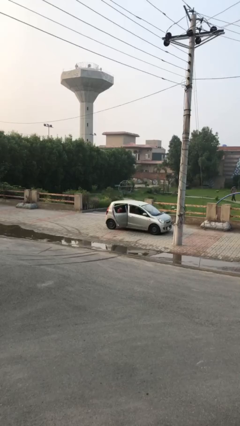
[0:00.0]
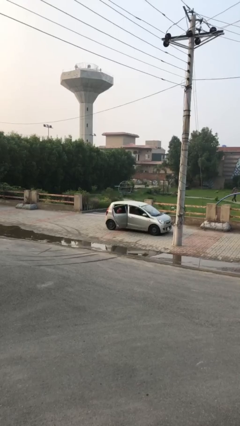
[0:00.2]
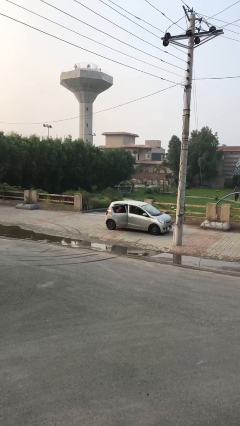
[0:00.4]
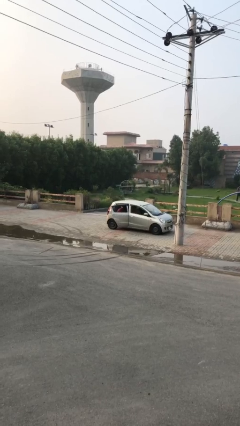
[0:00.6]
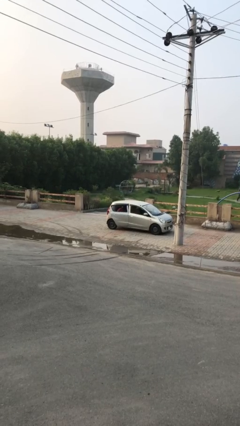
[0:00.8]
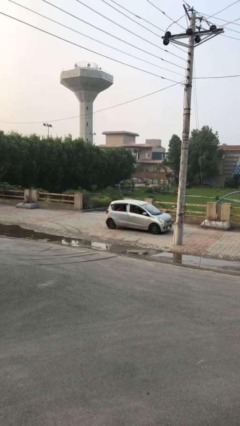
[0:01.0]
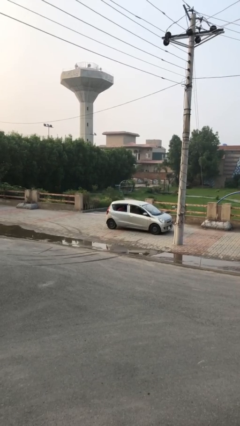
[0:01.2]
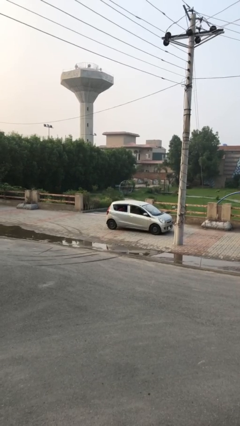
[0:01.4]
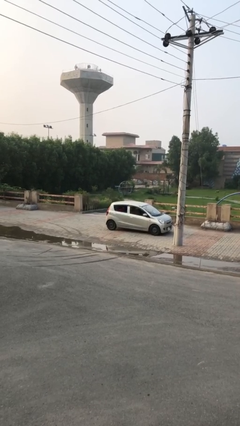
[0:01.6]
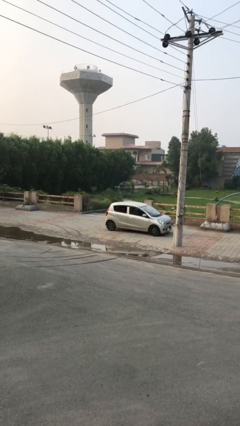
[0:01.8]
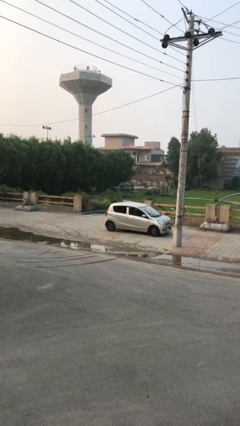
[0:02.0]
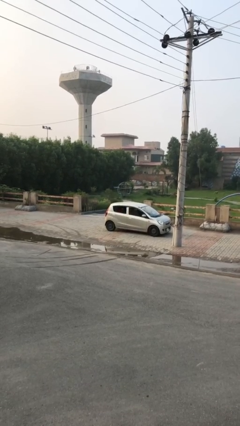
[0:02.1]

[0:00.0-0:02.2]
person closes car door

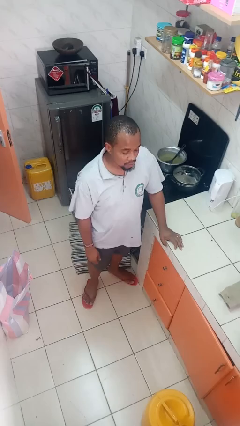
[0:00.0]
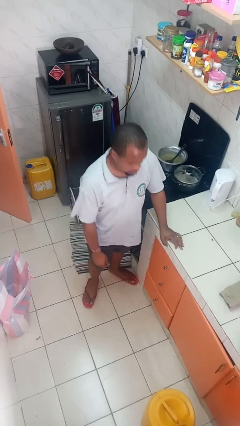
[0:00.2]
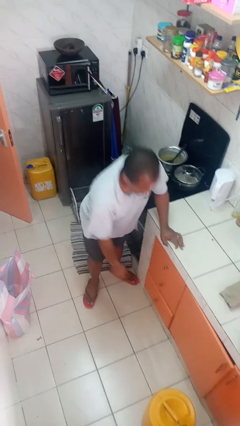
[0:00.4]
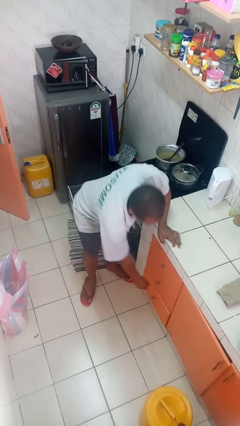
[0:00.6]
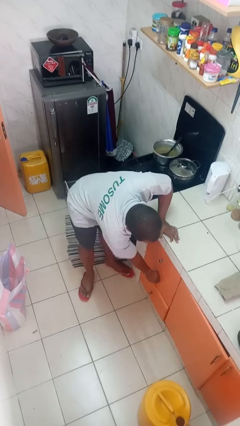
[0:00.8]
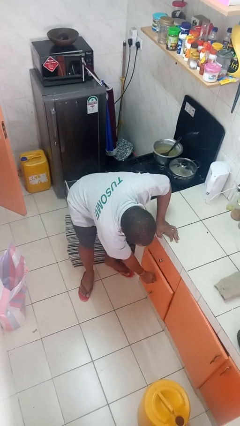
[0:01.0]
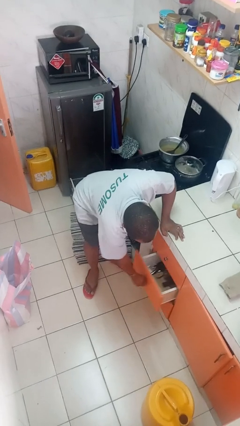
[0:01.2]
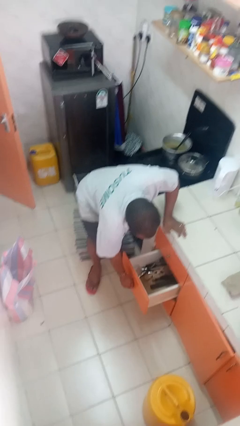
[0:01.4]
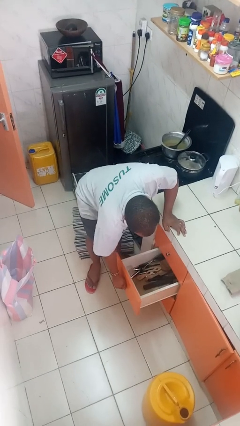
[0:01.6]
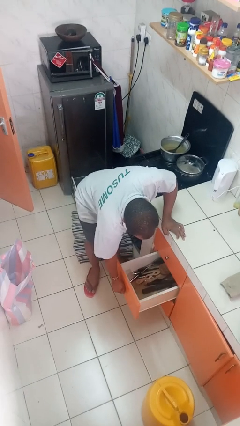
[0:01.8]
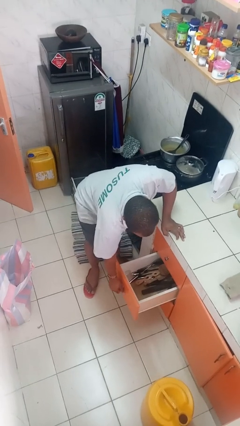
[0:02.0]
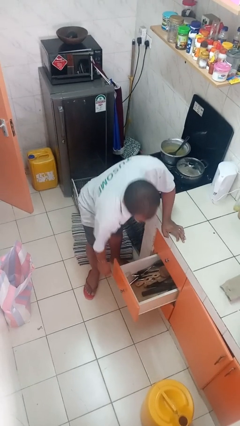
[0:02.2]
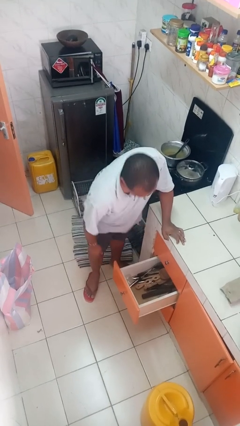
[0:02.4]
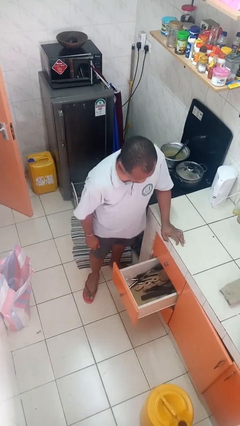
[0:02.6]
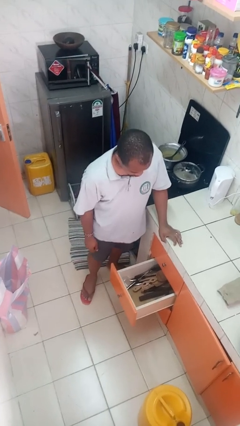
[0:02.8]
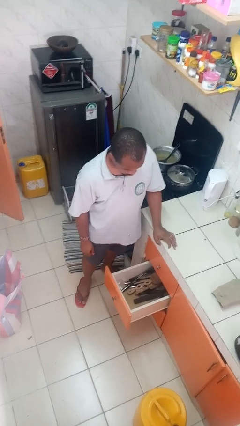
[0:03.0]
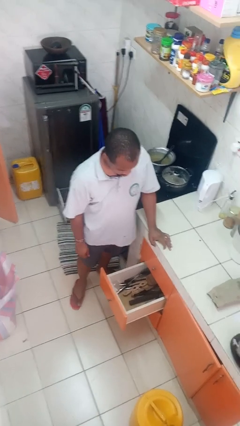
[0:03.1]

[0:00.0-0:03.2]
person opens kitchen drawer

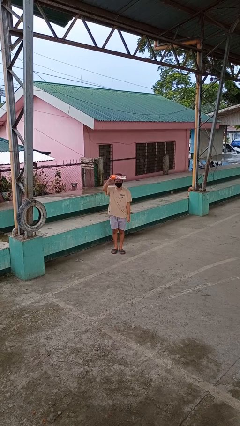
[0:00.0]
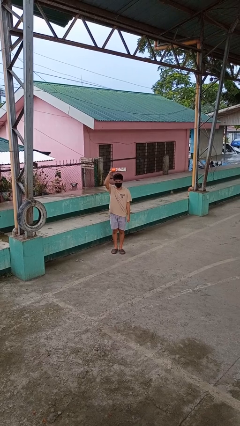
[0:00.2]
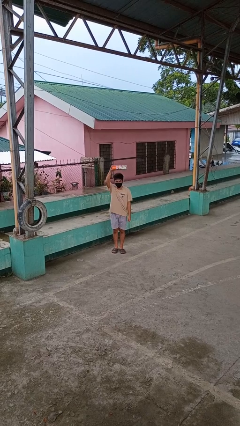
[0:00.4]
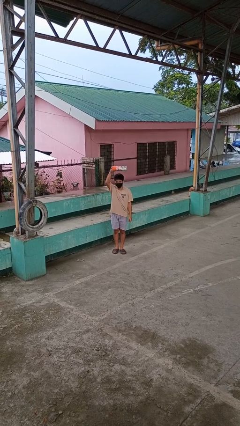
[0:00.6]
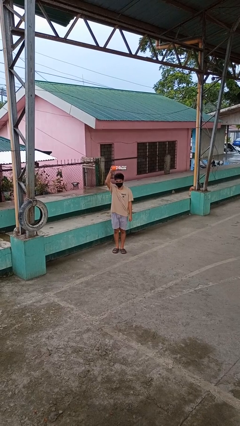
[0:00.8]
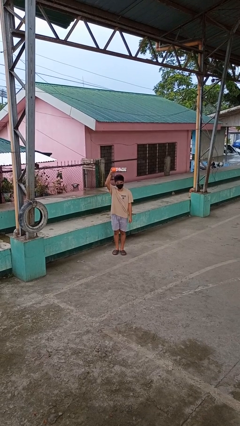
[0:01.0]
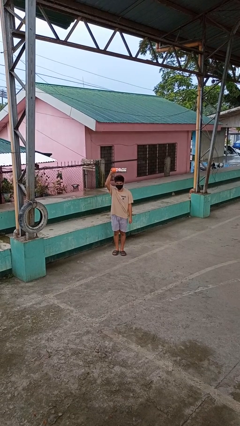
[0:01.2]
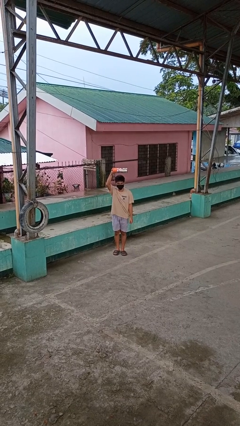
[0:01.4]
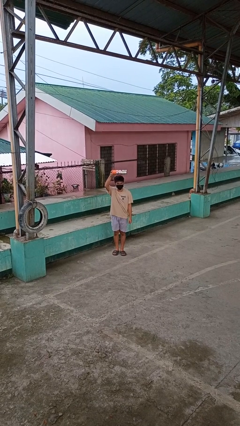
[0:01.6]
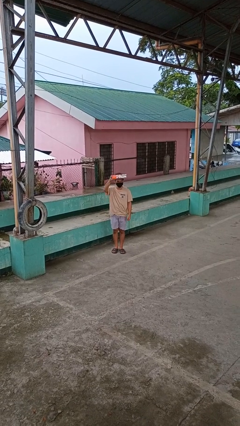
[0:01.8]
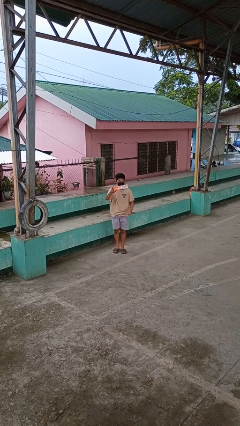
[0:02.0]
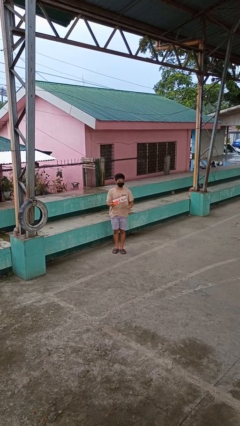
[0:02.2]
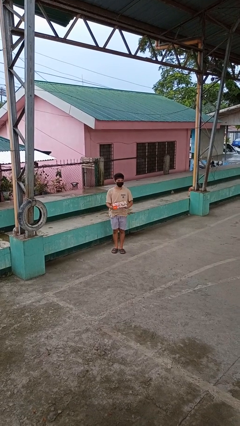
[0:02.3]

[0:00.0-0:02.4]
person holds object above head

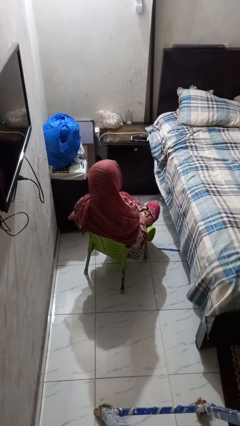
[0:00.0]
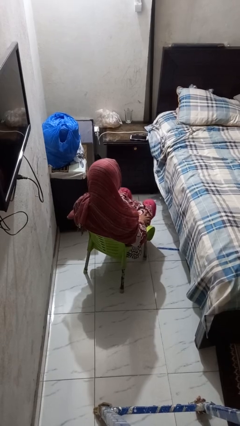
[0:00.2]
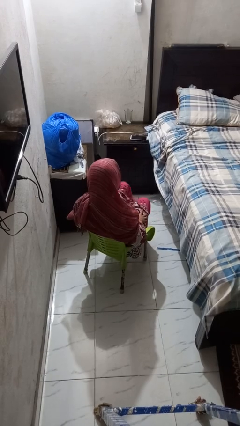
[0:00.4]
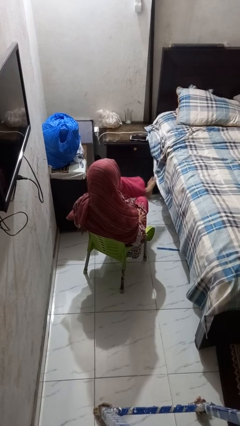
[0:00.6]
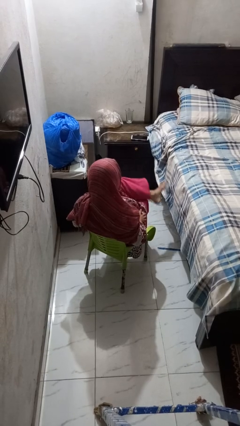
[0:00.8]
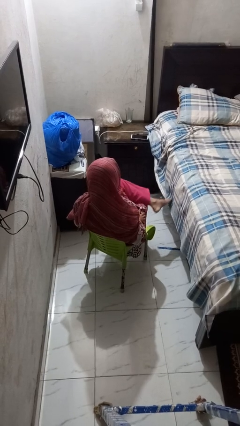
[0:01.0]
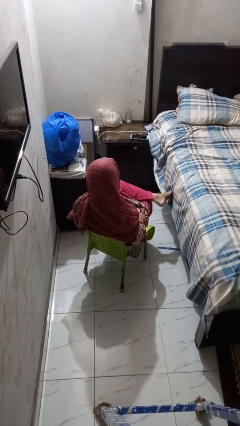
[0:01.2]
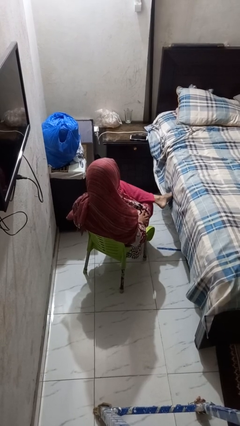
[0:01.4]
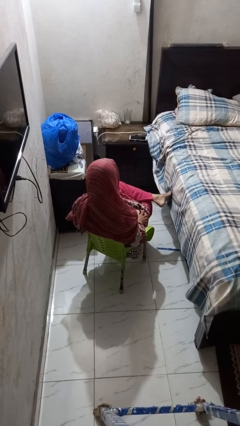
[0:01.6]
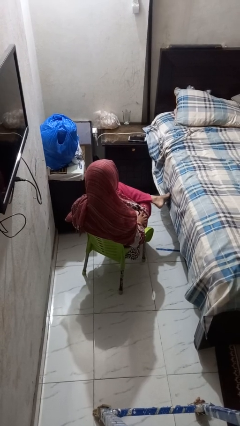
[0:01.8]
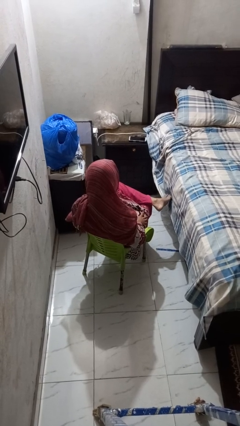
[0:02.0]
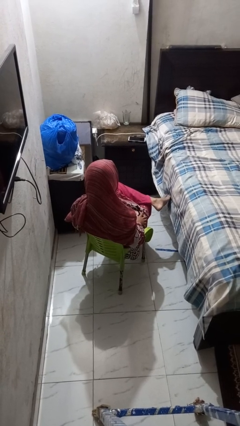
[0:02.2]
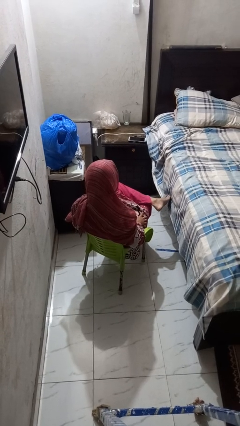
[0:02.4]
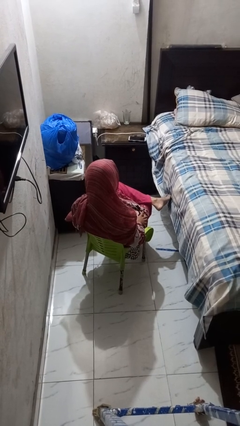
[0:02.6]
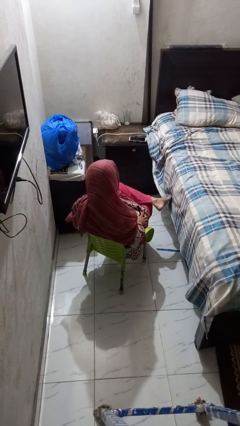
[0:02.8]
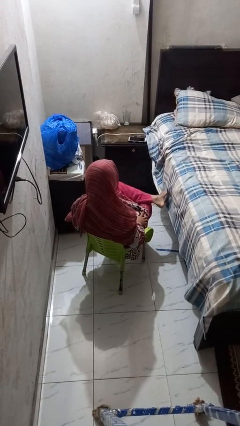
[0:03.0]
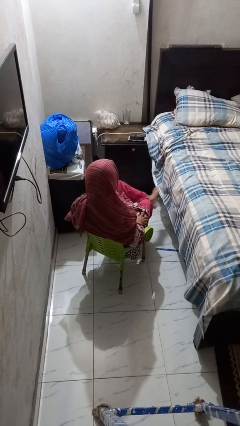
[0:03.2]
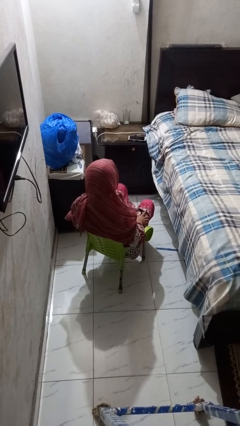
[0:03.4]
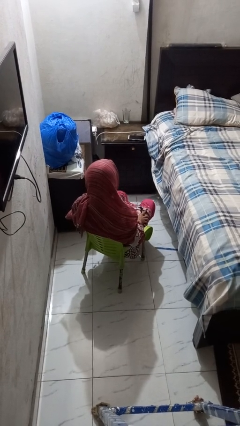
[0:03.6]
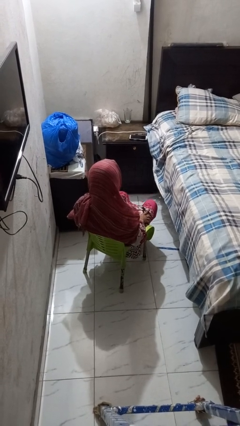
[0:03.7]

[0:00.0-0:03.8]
person crosses legs

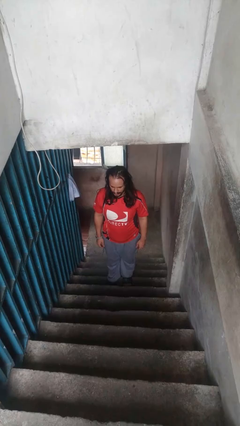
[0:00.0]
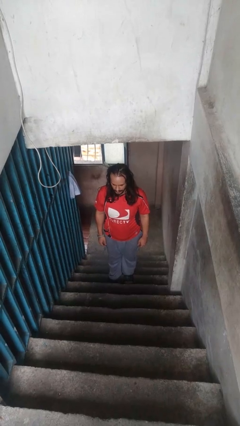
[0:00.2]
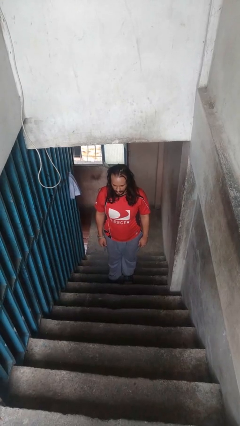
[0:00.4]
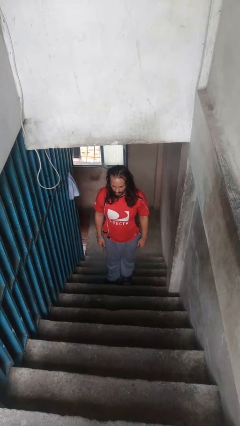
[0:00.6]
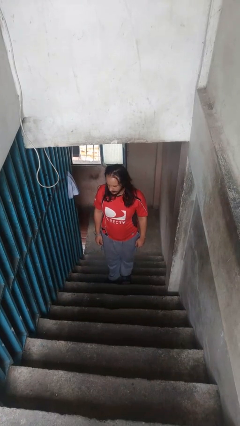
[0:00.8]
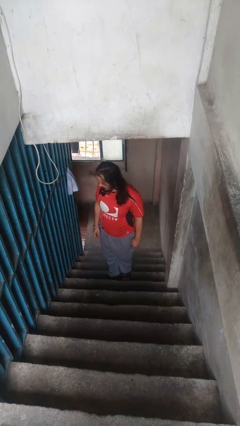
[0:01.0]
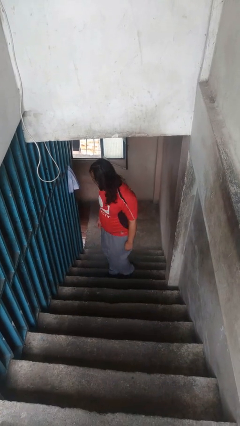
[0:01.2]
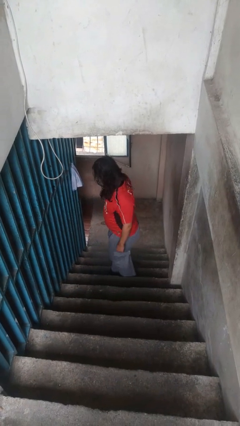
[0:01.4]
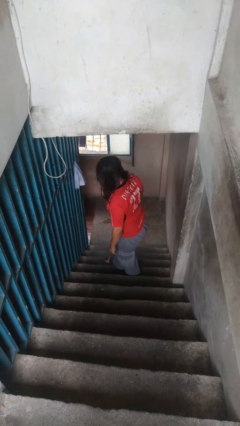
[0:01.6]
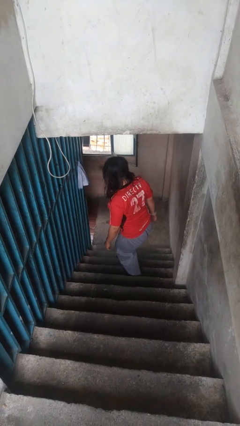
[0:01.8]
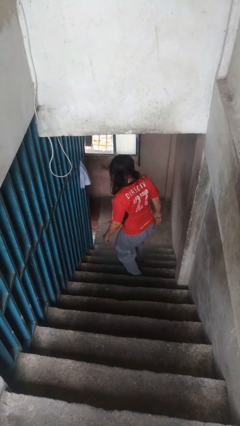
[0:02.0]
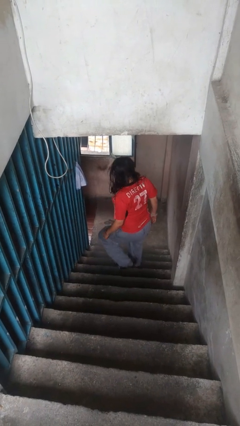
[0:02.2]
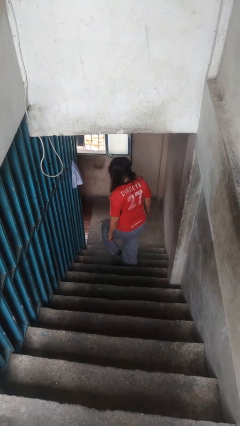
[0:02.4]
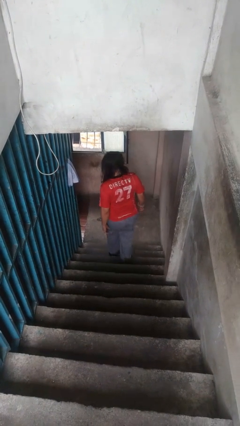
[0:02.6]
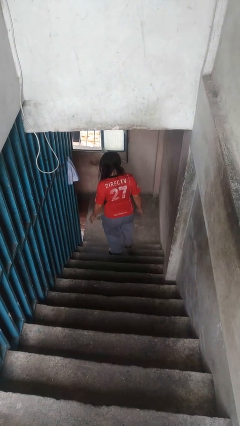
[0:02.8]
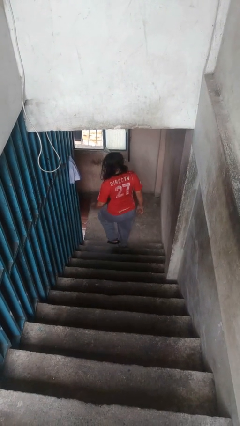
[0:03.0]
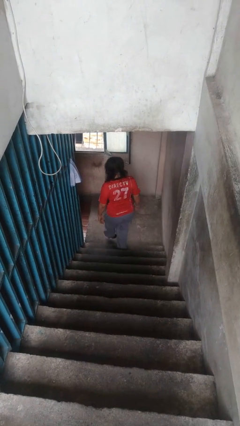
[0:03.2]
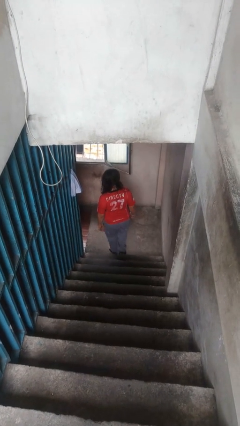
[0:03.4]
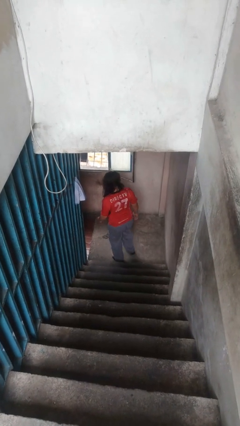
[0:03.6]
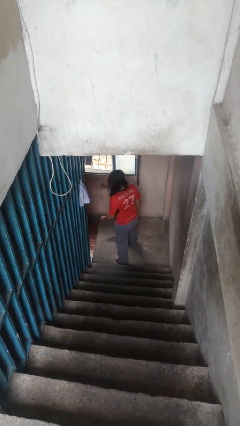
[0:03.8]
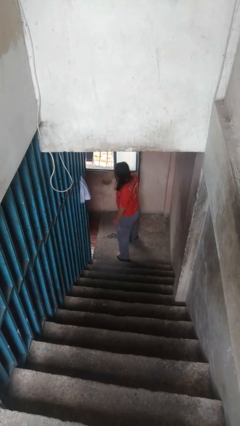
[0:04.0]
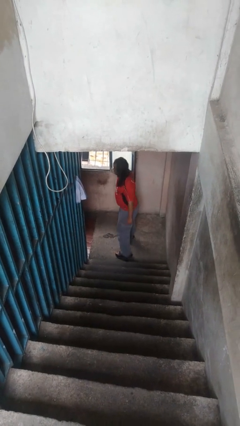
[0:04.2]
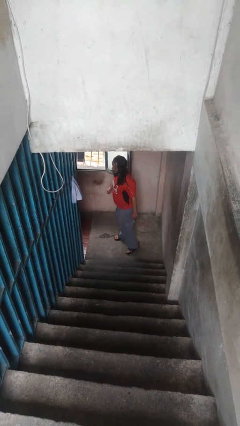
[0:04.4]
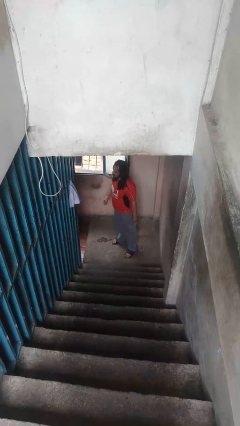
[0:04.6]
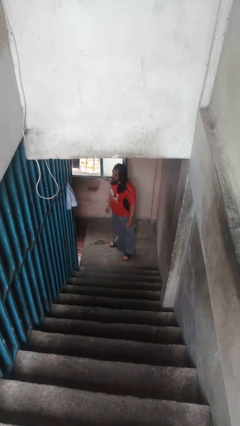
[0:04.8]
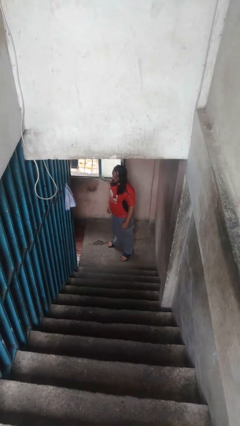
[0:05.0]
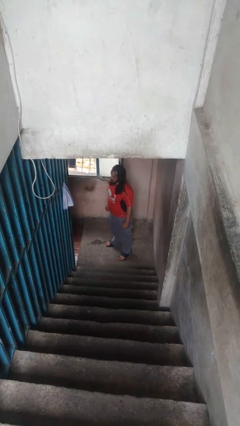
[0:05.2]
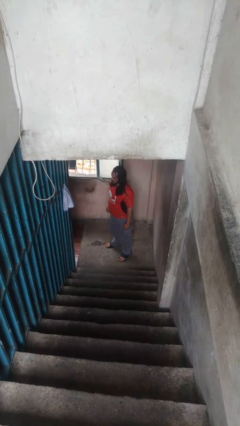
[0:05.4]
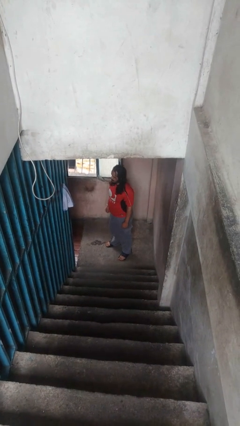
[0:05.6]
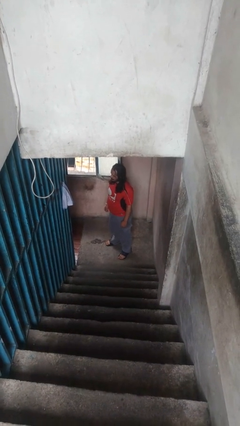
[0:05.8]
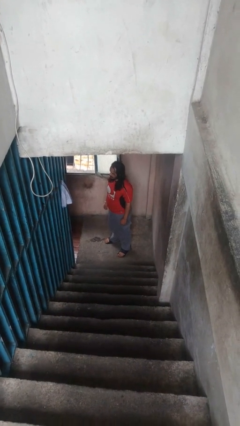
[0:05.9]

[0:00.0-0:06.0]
person climbs down stairs
